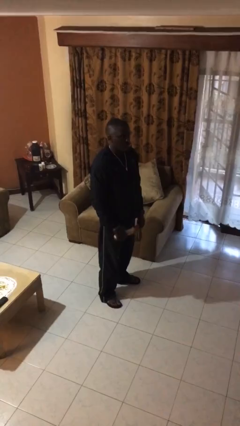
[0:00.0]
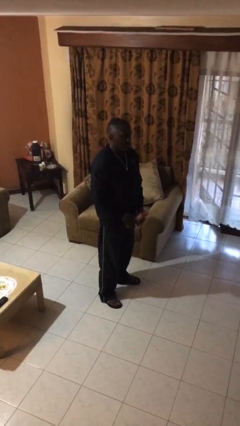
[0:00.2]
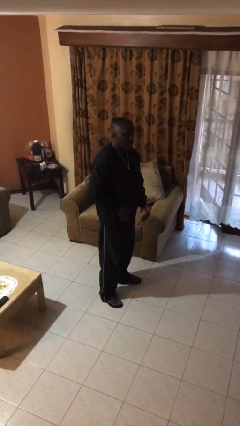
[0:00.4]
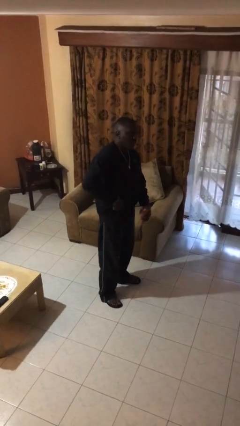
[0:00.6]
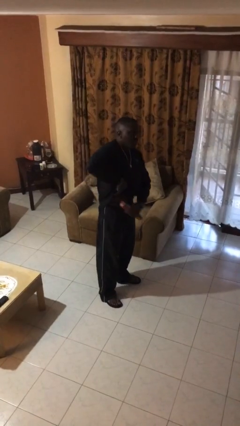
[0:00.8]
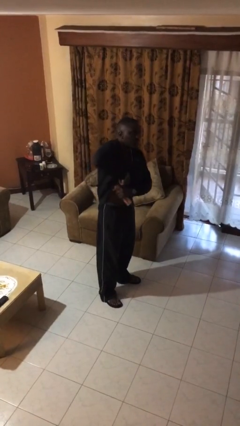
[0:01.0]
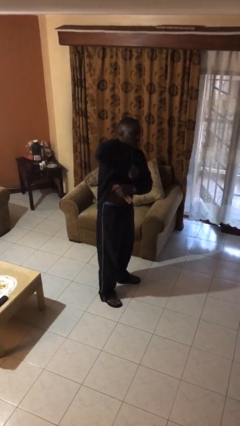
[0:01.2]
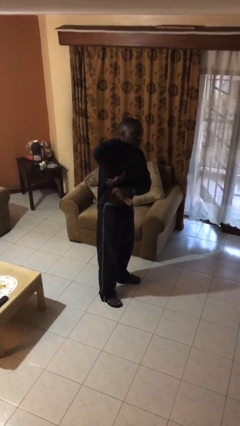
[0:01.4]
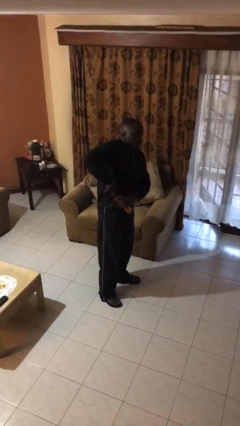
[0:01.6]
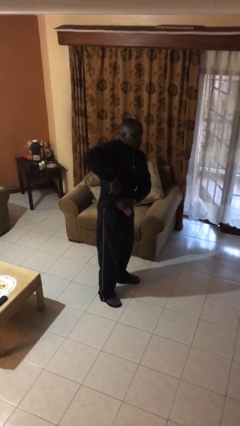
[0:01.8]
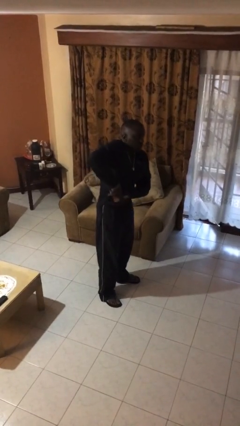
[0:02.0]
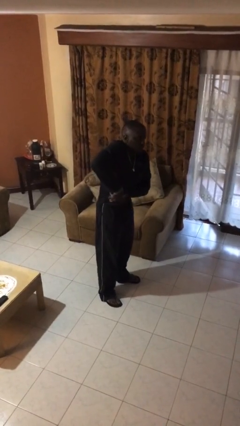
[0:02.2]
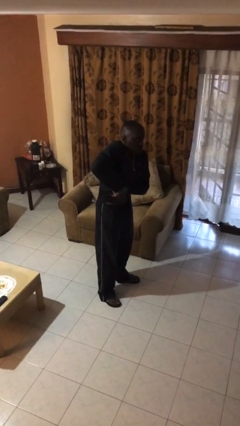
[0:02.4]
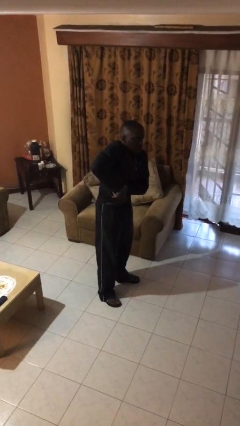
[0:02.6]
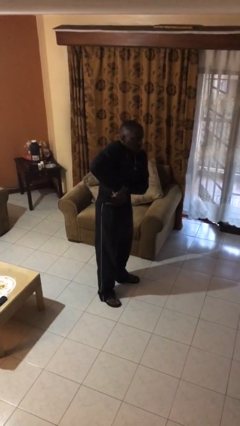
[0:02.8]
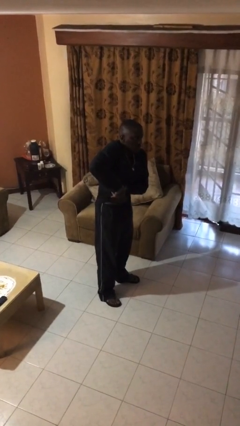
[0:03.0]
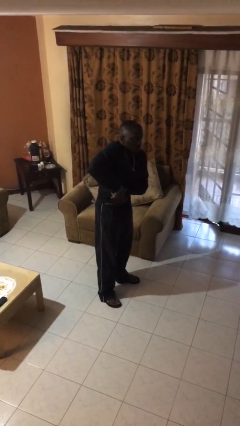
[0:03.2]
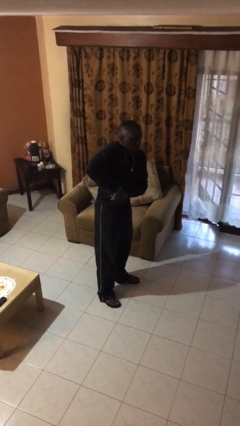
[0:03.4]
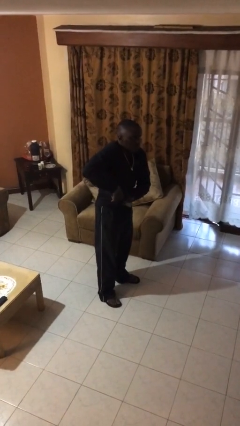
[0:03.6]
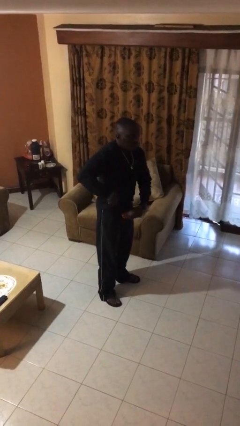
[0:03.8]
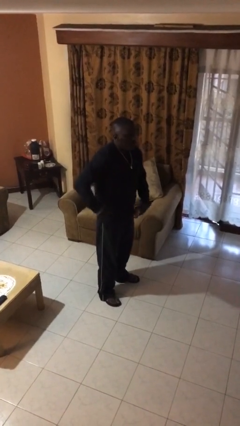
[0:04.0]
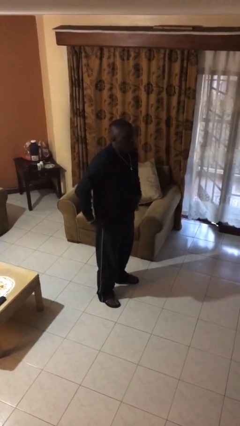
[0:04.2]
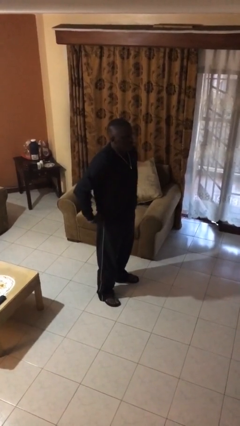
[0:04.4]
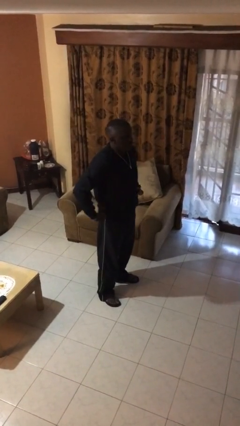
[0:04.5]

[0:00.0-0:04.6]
person applies deodorant

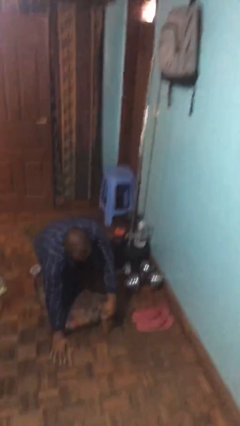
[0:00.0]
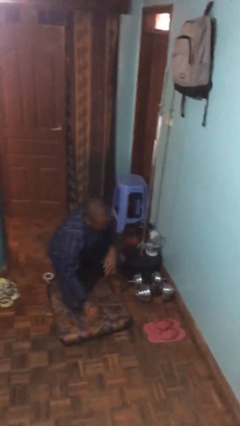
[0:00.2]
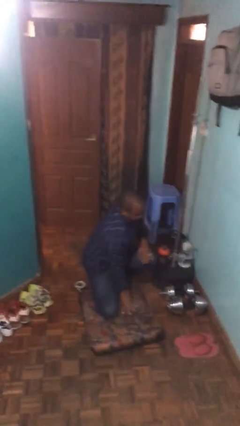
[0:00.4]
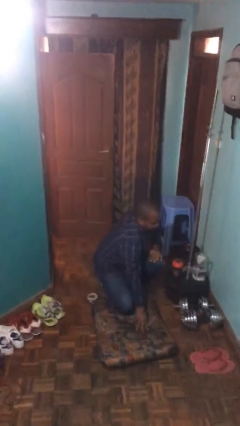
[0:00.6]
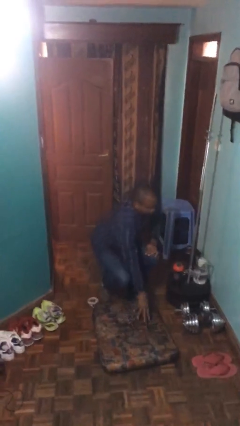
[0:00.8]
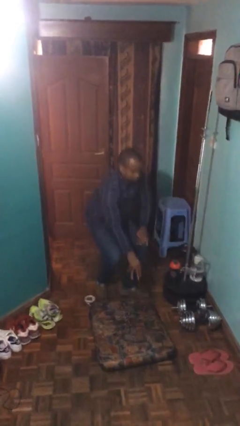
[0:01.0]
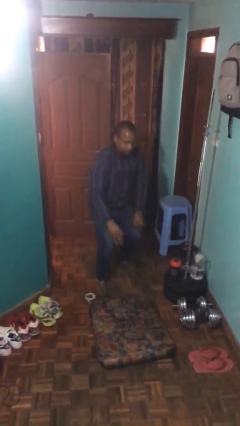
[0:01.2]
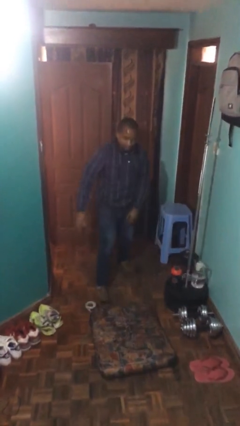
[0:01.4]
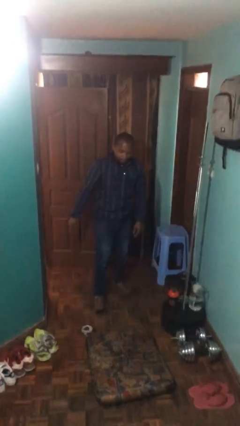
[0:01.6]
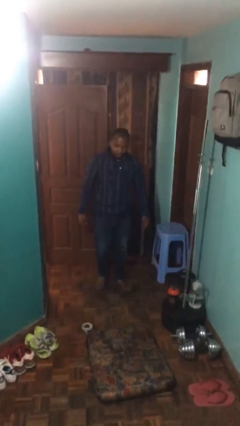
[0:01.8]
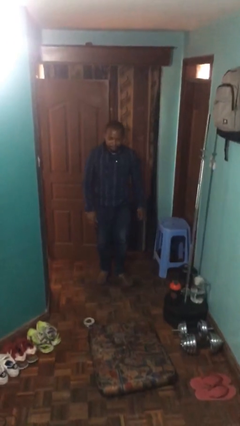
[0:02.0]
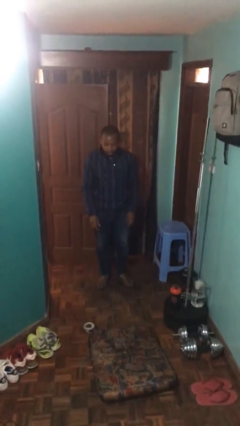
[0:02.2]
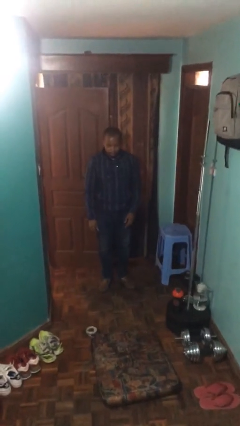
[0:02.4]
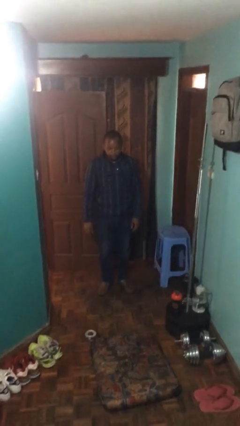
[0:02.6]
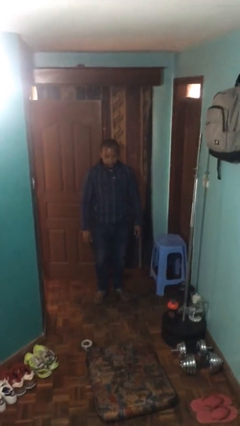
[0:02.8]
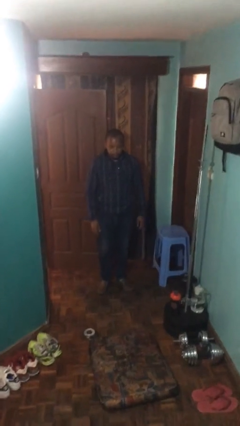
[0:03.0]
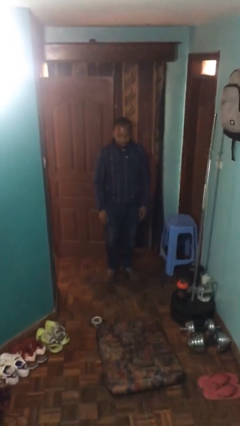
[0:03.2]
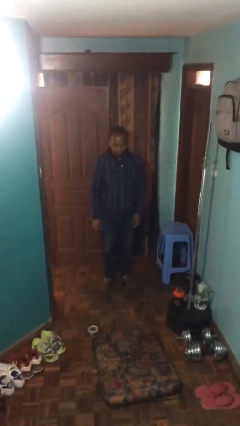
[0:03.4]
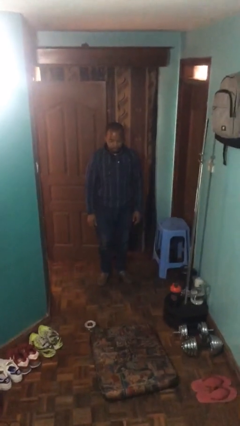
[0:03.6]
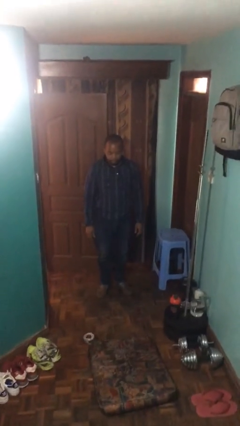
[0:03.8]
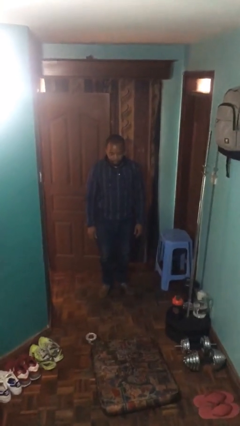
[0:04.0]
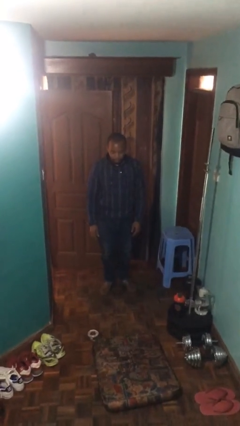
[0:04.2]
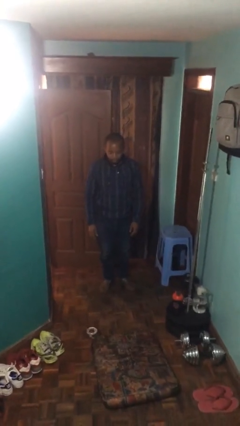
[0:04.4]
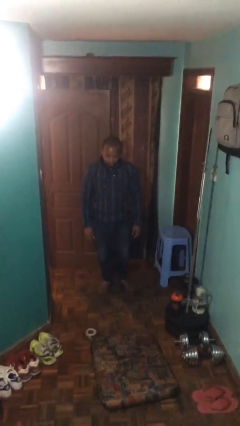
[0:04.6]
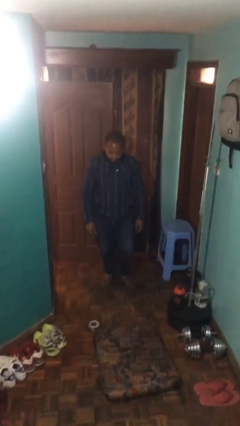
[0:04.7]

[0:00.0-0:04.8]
person stands up from floor

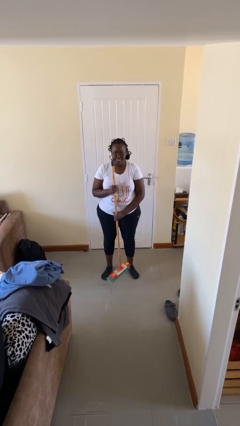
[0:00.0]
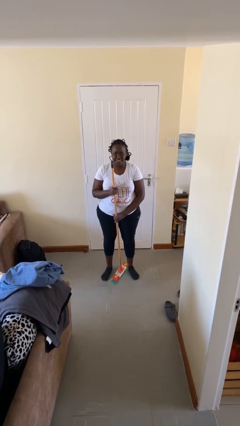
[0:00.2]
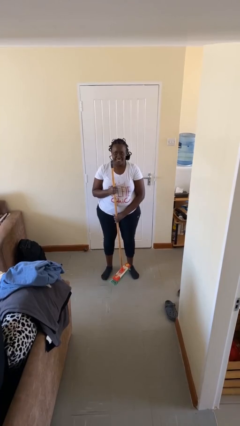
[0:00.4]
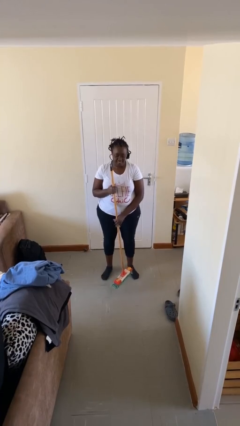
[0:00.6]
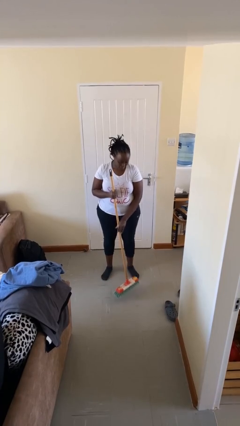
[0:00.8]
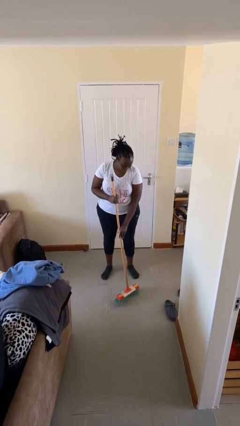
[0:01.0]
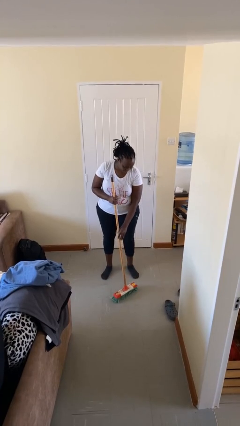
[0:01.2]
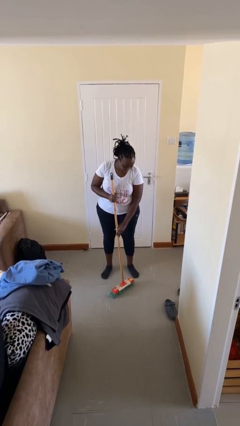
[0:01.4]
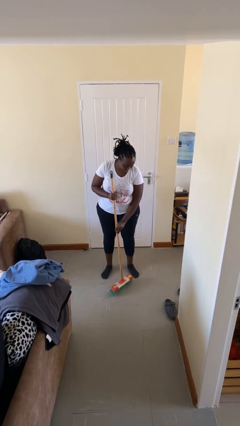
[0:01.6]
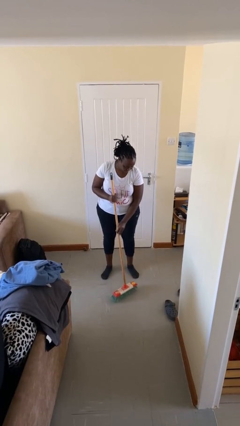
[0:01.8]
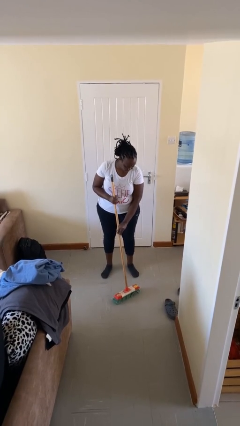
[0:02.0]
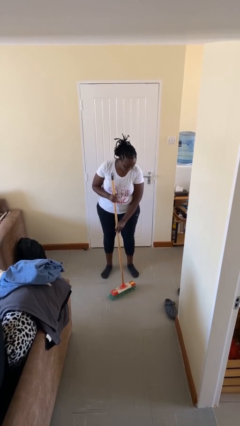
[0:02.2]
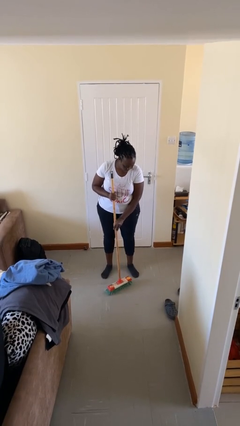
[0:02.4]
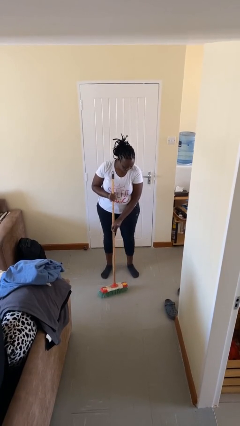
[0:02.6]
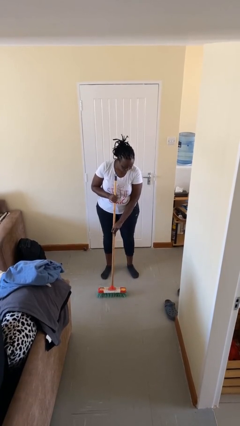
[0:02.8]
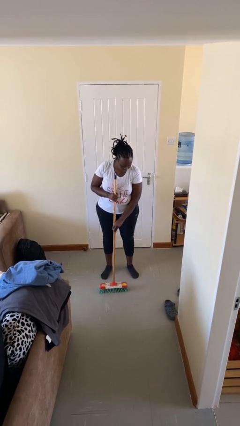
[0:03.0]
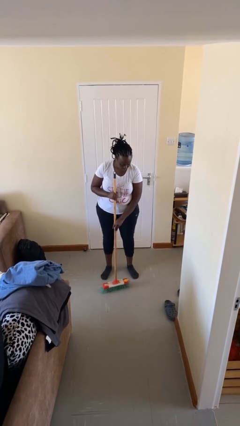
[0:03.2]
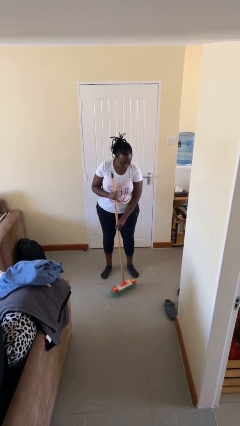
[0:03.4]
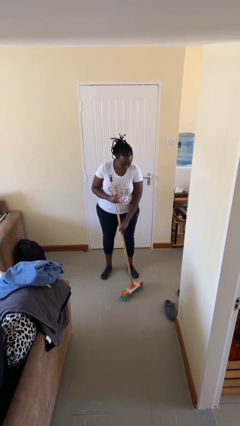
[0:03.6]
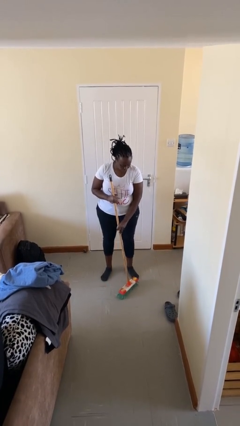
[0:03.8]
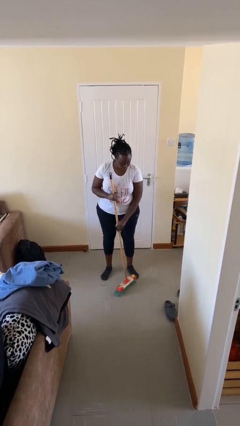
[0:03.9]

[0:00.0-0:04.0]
person sweeps floor

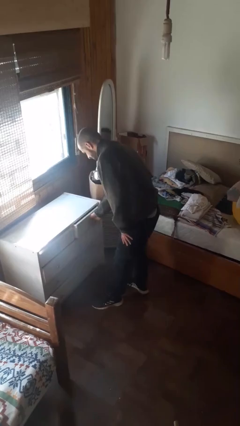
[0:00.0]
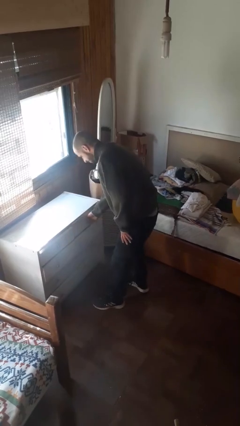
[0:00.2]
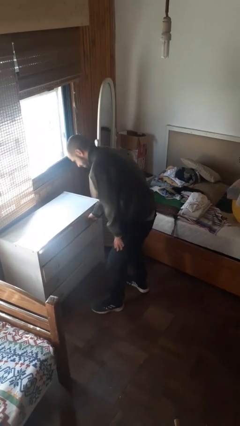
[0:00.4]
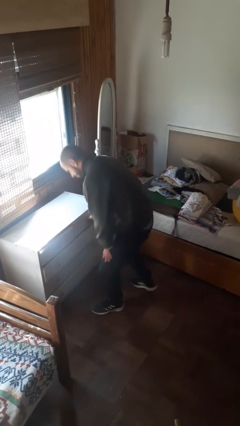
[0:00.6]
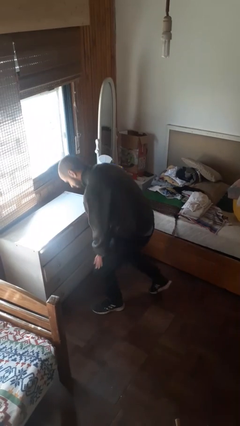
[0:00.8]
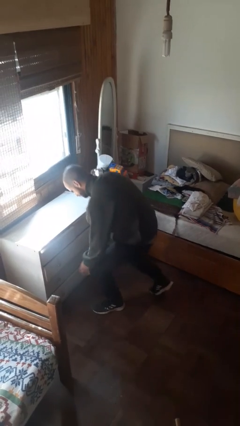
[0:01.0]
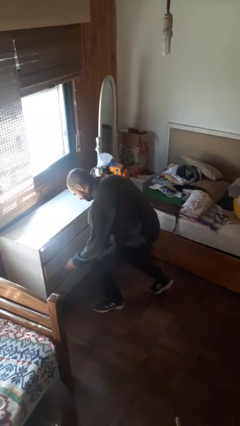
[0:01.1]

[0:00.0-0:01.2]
person closes dresser drawer

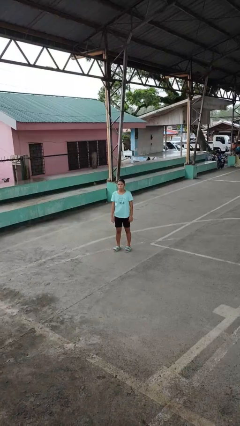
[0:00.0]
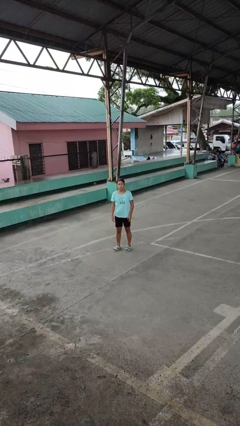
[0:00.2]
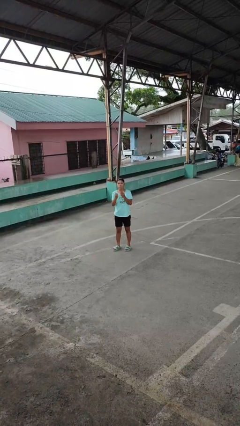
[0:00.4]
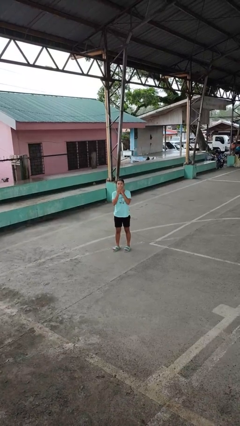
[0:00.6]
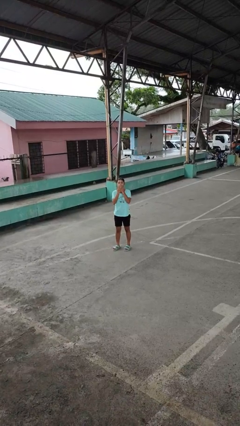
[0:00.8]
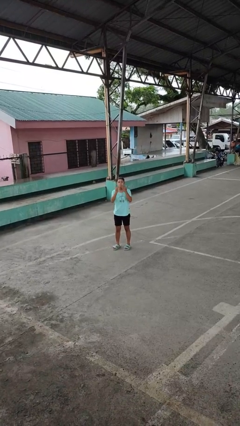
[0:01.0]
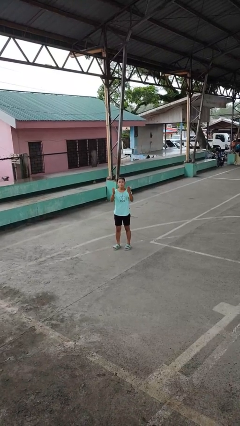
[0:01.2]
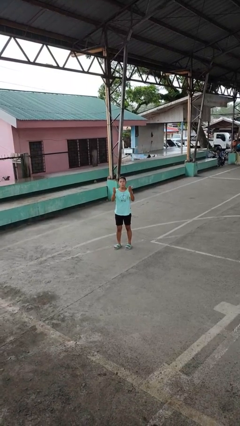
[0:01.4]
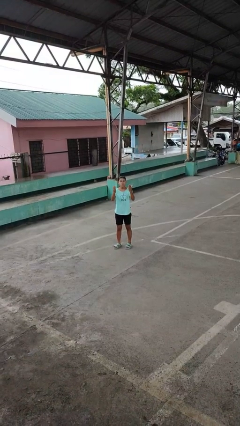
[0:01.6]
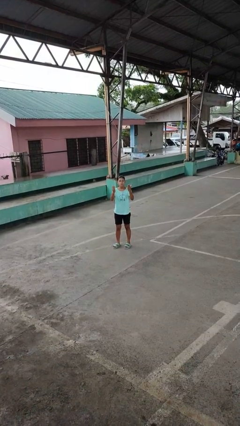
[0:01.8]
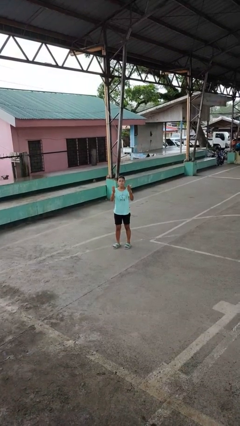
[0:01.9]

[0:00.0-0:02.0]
person gestures blow kiss

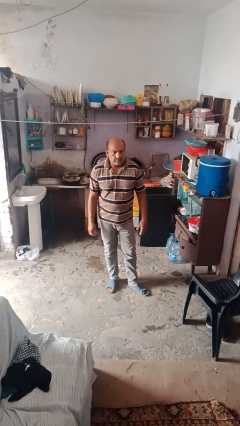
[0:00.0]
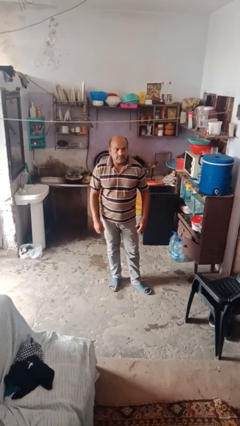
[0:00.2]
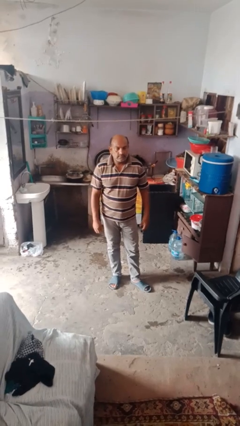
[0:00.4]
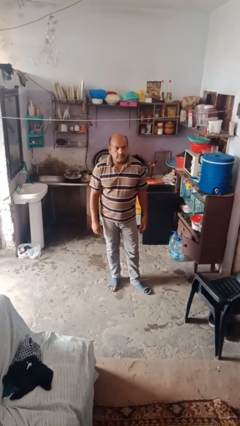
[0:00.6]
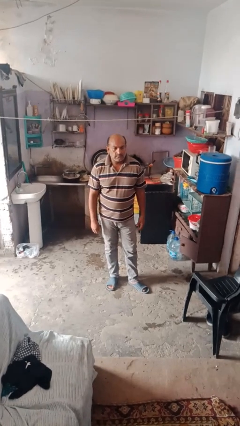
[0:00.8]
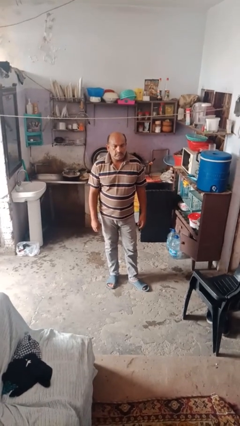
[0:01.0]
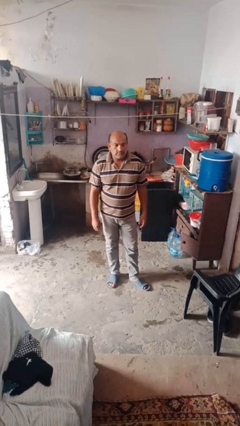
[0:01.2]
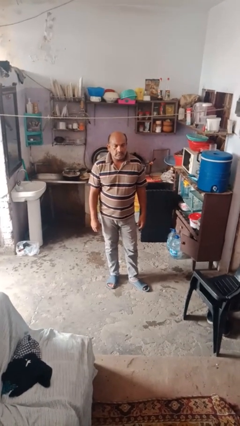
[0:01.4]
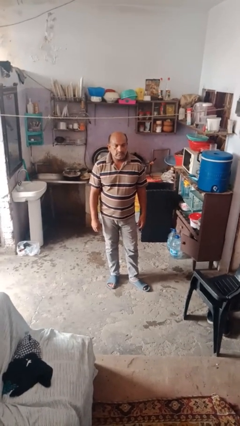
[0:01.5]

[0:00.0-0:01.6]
person stretches arms over head
